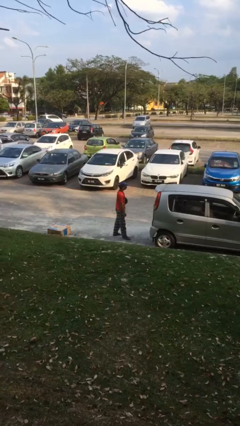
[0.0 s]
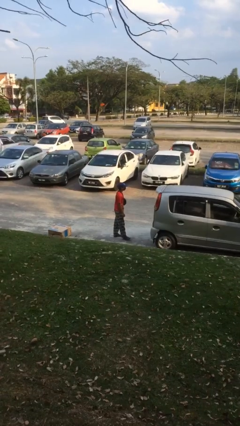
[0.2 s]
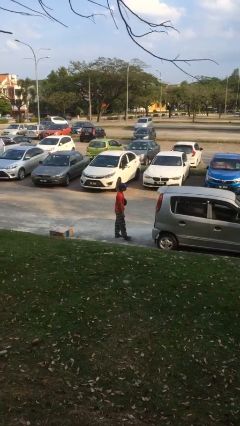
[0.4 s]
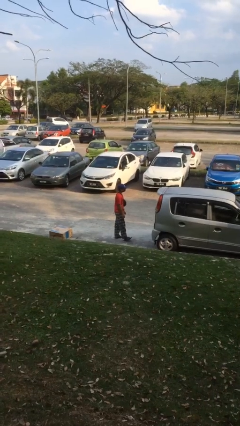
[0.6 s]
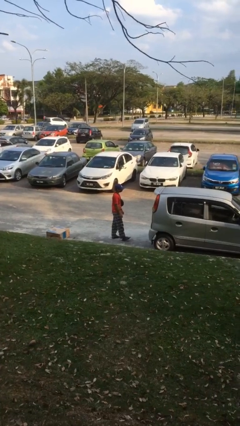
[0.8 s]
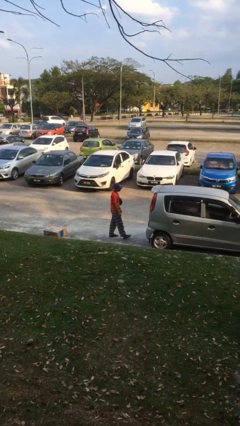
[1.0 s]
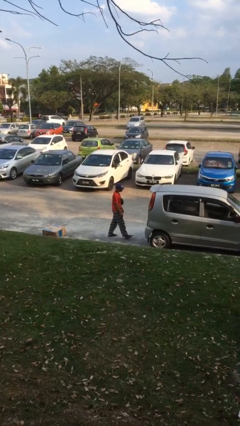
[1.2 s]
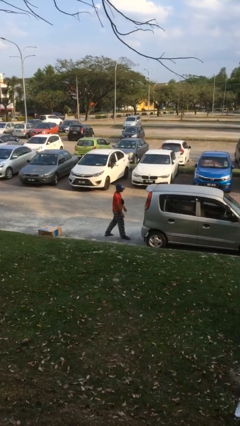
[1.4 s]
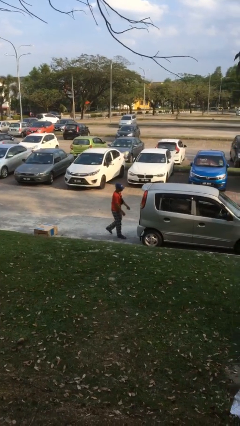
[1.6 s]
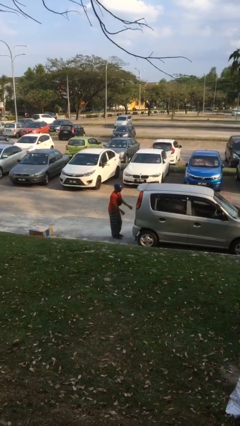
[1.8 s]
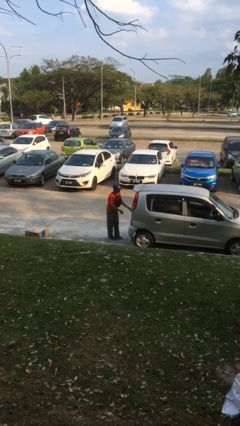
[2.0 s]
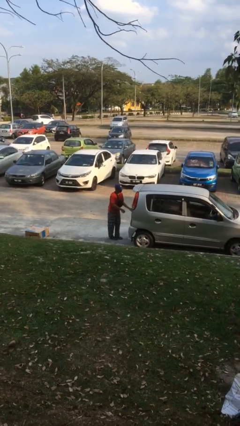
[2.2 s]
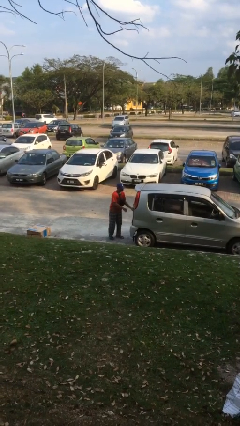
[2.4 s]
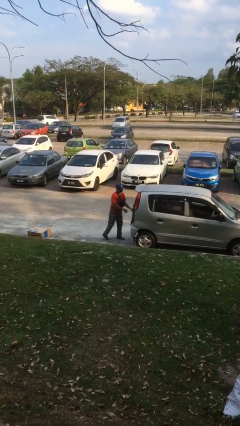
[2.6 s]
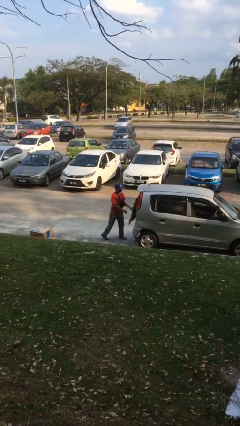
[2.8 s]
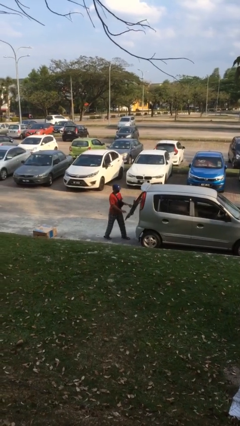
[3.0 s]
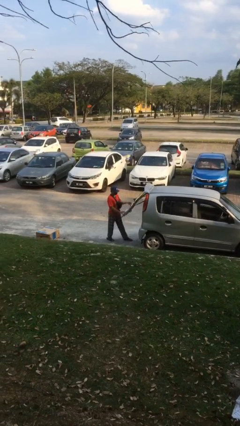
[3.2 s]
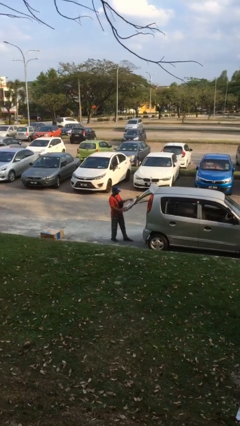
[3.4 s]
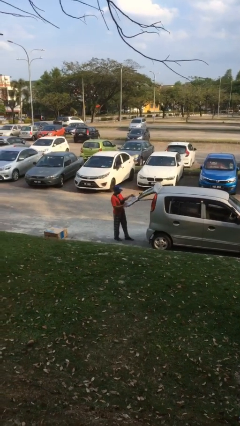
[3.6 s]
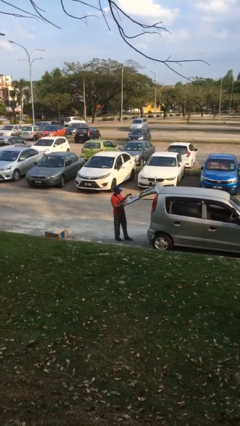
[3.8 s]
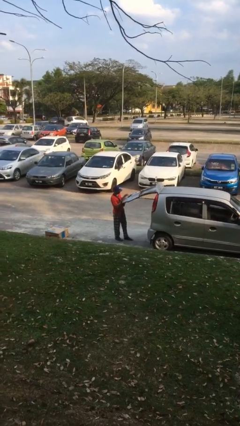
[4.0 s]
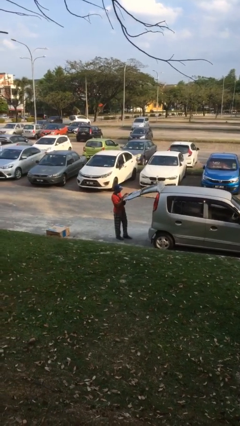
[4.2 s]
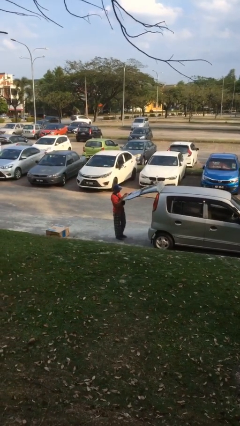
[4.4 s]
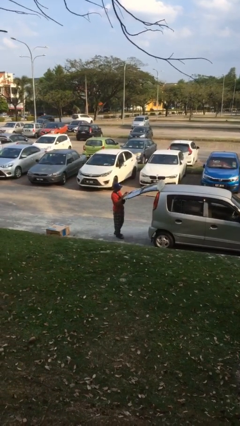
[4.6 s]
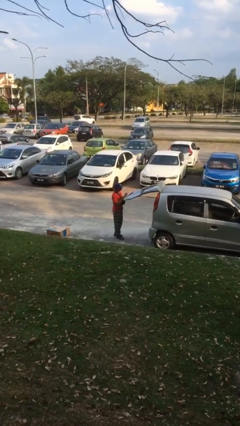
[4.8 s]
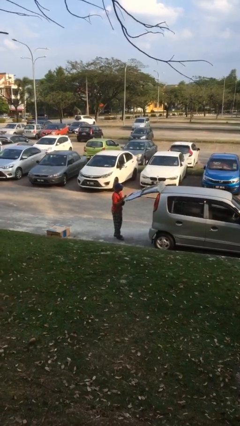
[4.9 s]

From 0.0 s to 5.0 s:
person opens car trunk

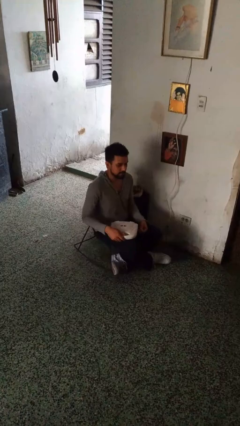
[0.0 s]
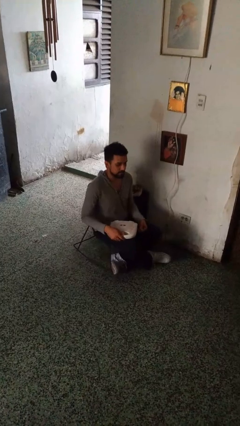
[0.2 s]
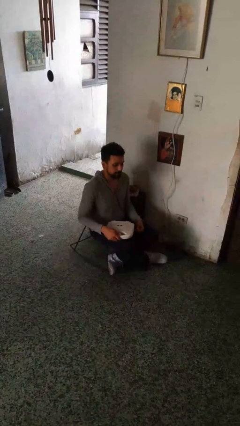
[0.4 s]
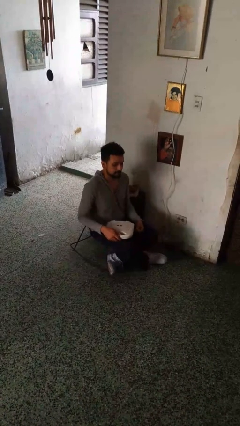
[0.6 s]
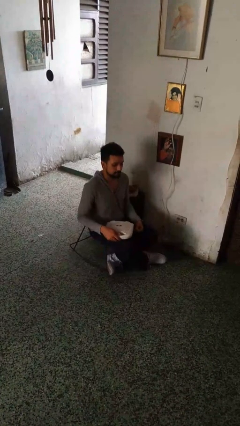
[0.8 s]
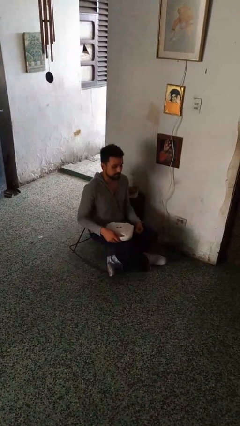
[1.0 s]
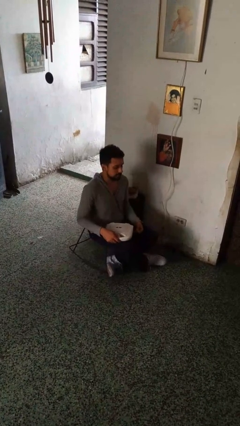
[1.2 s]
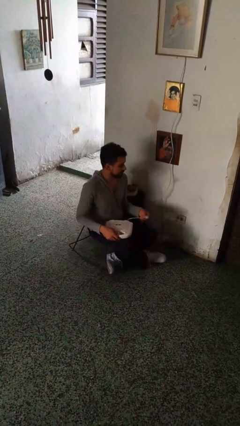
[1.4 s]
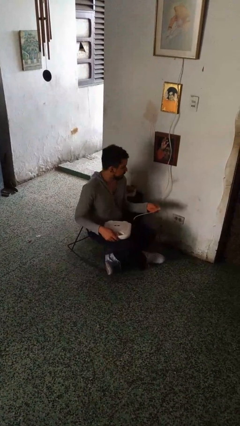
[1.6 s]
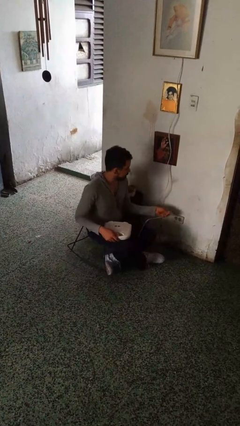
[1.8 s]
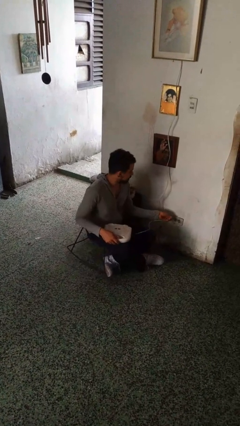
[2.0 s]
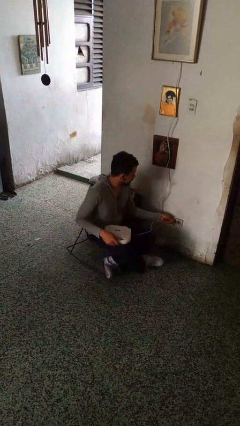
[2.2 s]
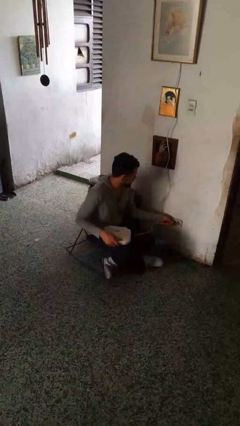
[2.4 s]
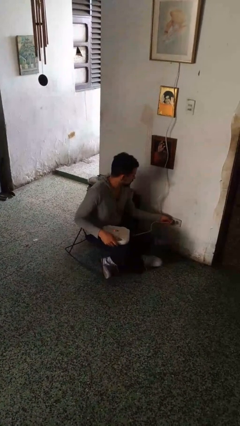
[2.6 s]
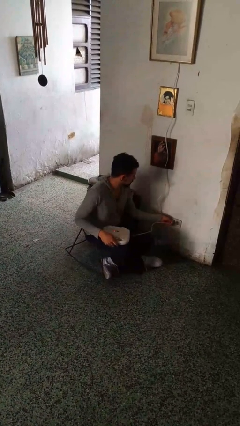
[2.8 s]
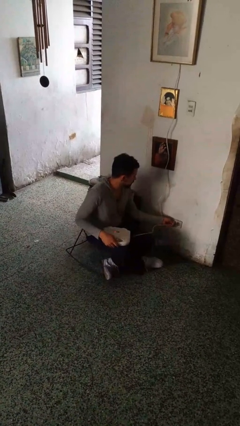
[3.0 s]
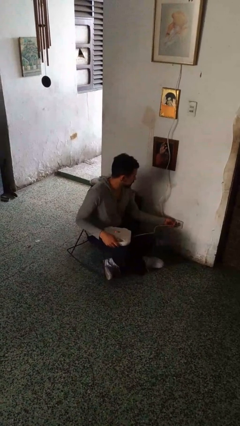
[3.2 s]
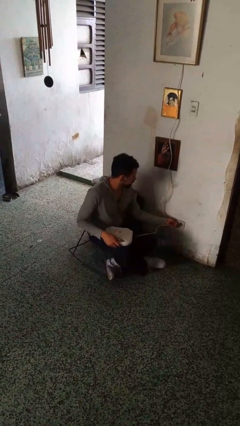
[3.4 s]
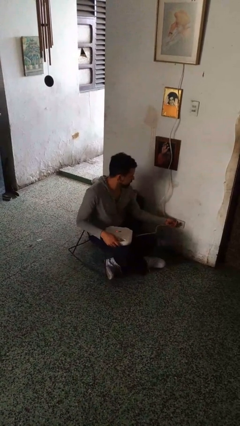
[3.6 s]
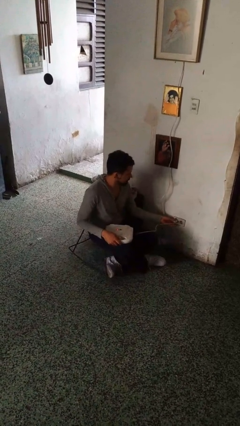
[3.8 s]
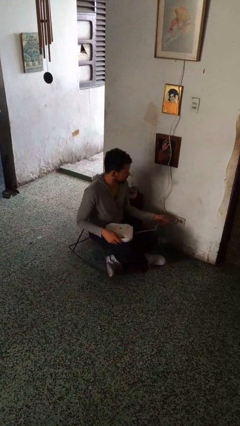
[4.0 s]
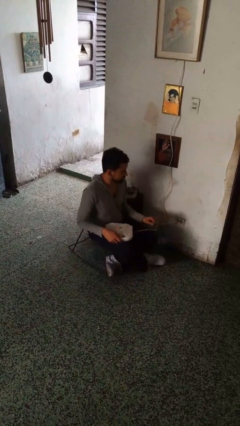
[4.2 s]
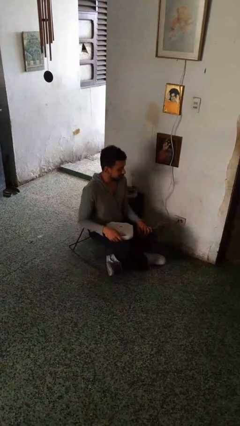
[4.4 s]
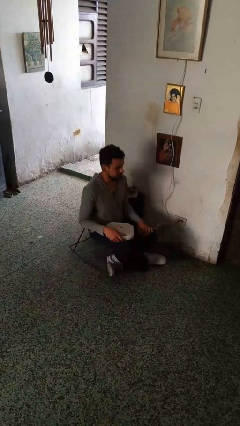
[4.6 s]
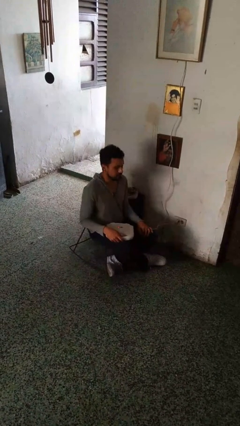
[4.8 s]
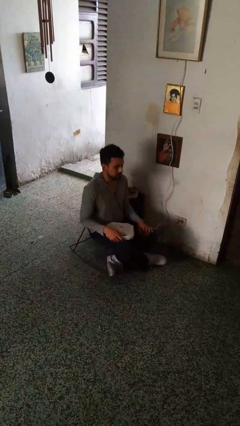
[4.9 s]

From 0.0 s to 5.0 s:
person plugs into electrical socket

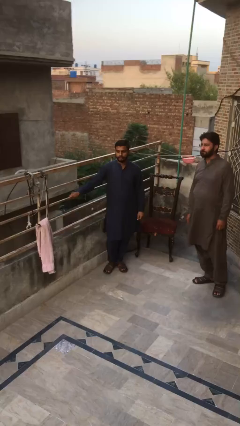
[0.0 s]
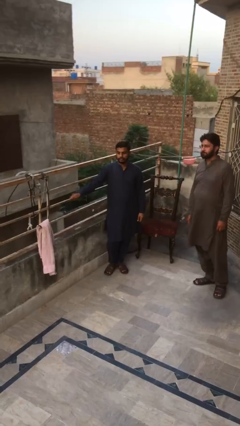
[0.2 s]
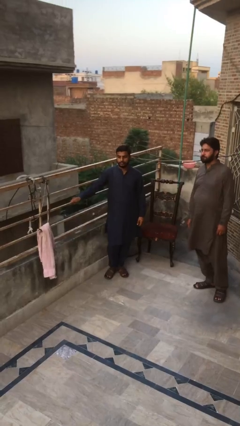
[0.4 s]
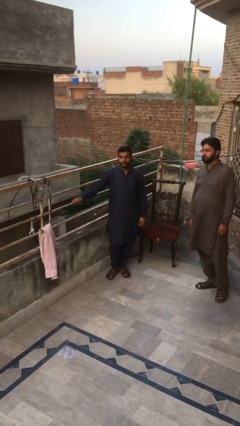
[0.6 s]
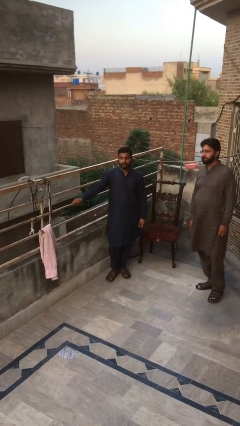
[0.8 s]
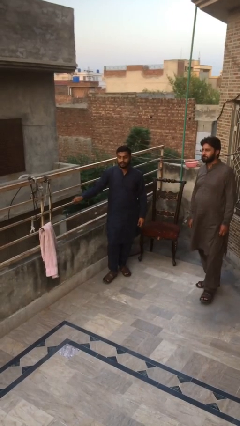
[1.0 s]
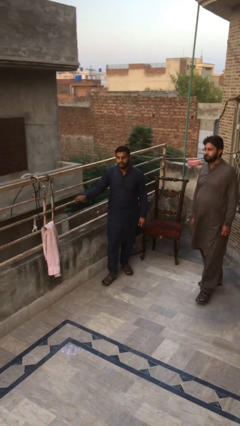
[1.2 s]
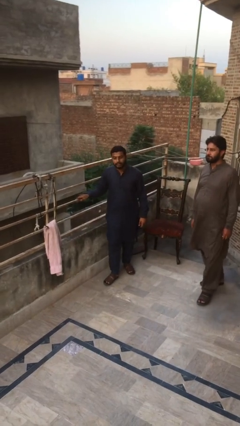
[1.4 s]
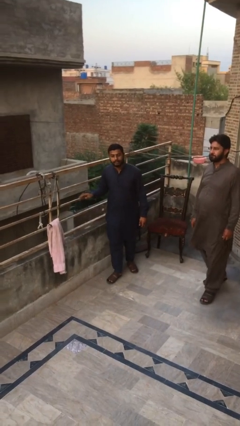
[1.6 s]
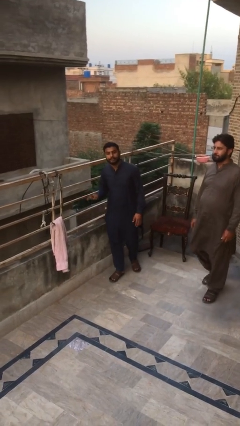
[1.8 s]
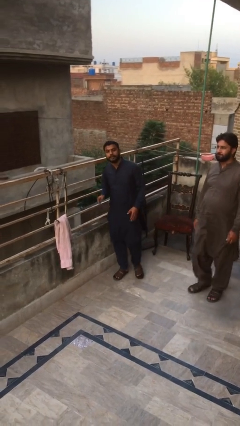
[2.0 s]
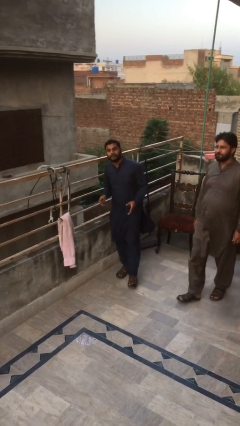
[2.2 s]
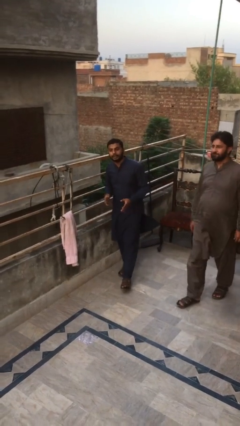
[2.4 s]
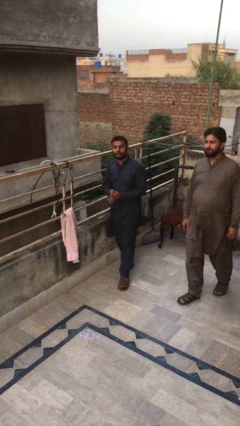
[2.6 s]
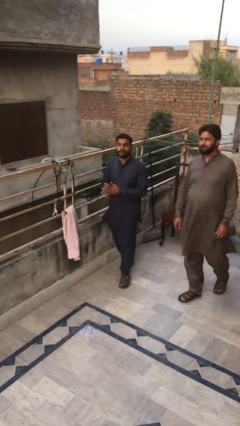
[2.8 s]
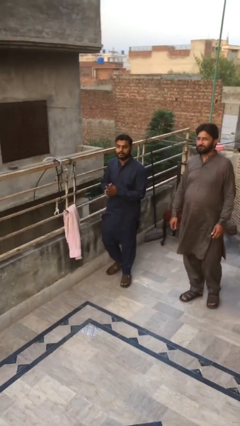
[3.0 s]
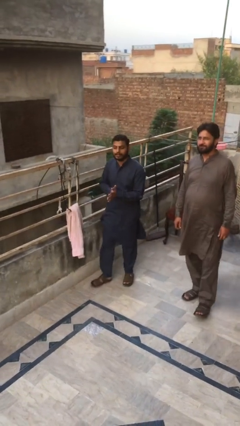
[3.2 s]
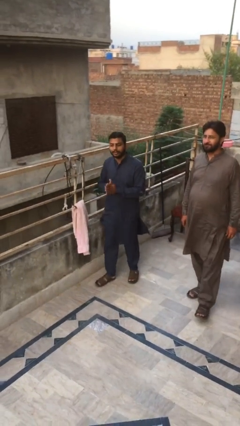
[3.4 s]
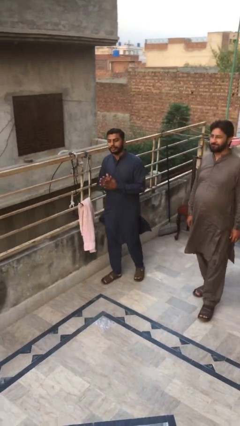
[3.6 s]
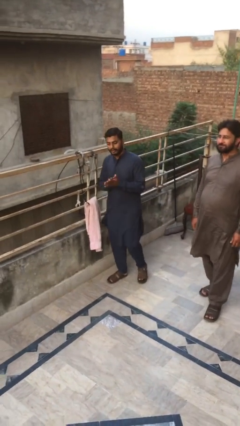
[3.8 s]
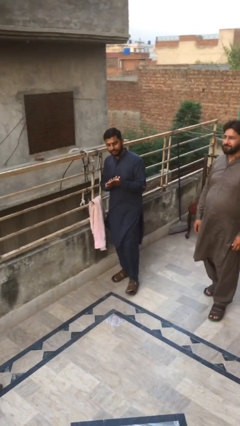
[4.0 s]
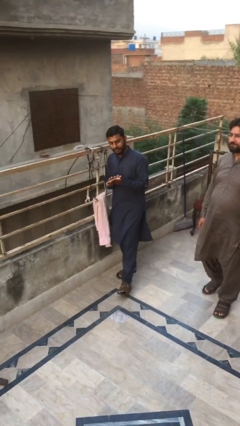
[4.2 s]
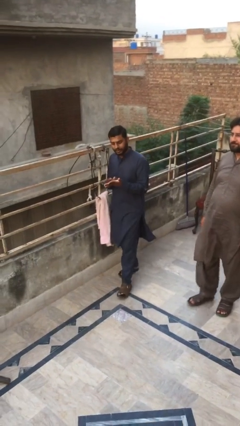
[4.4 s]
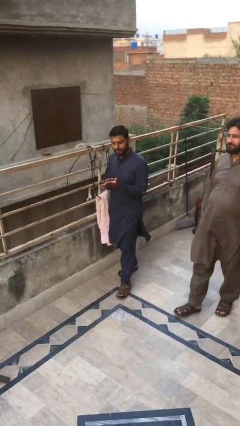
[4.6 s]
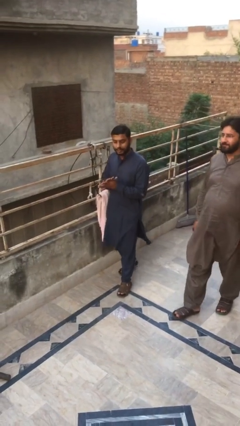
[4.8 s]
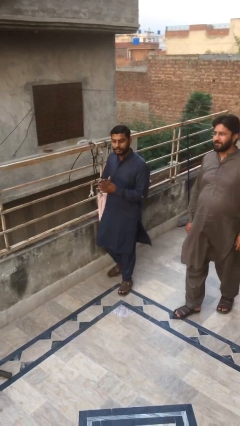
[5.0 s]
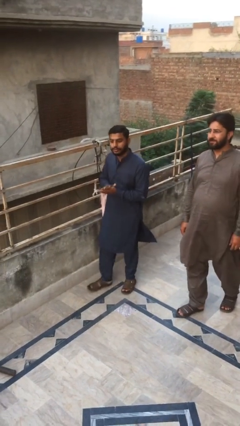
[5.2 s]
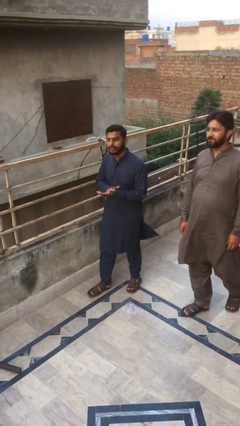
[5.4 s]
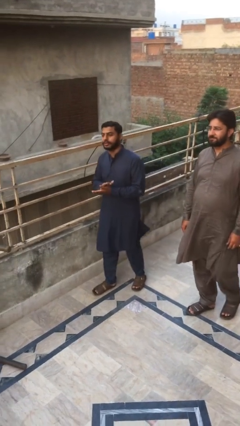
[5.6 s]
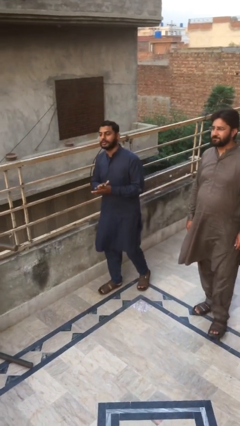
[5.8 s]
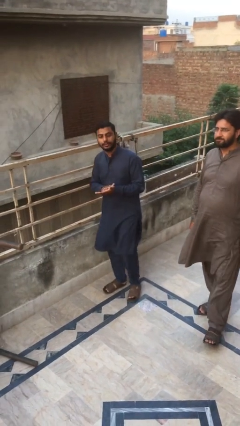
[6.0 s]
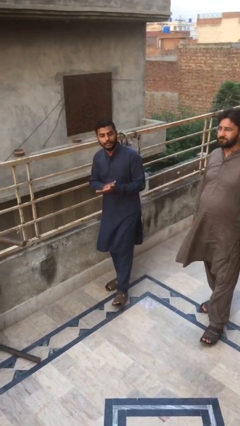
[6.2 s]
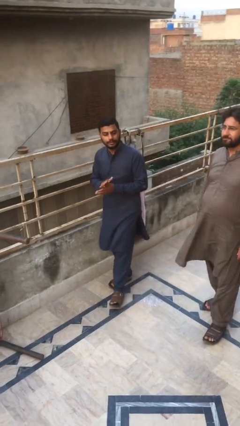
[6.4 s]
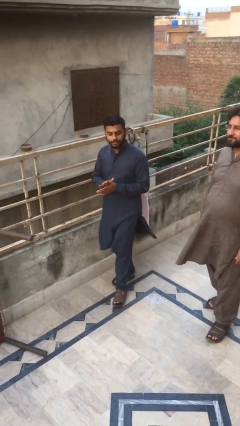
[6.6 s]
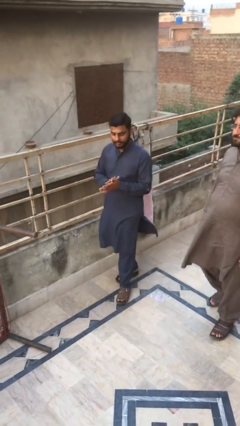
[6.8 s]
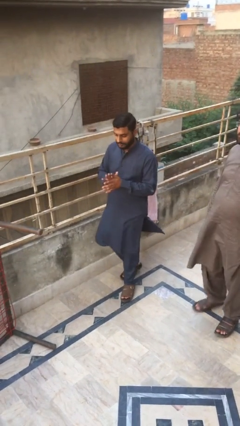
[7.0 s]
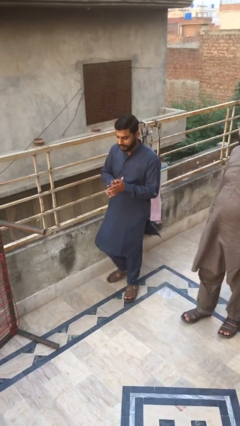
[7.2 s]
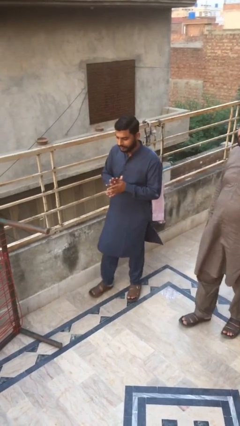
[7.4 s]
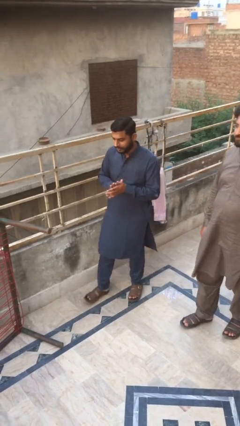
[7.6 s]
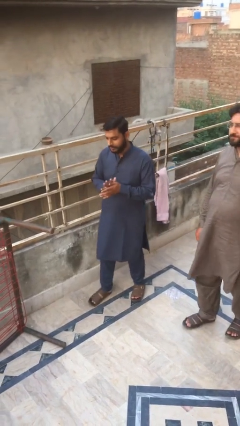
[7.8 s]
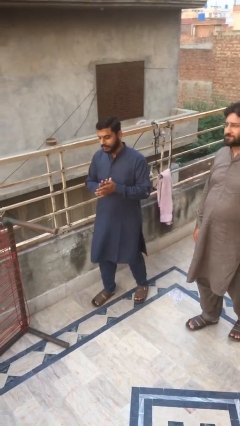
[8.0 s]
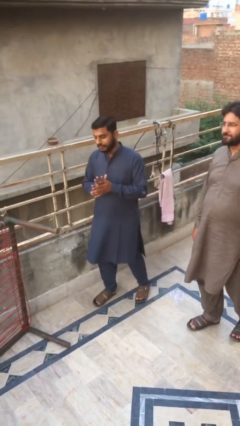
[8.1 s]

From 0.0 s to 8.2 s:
person talks to person
